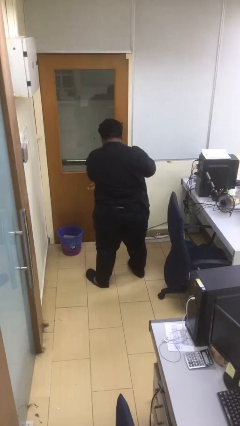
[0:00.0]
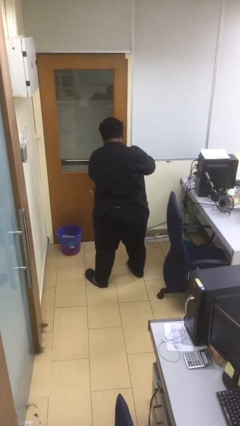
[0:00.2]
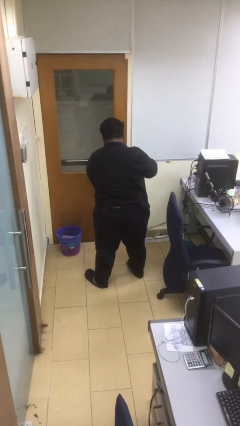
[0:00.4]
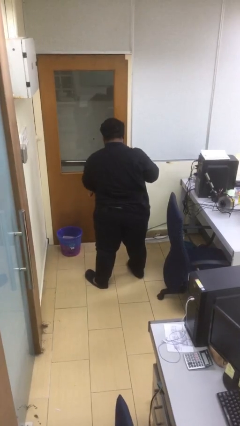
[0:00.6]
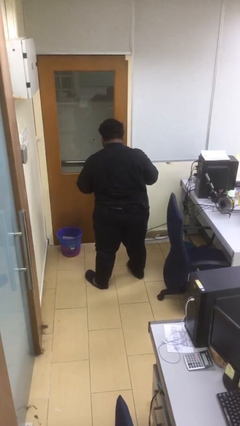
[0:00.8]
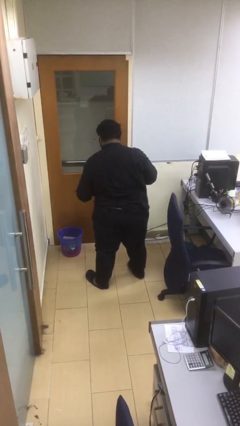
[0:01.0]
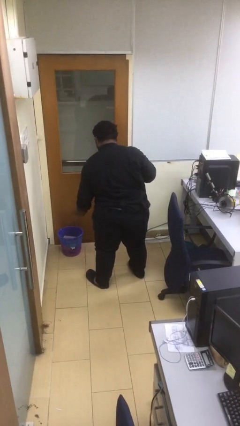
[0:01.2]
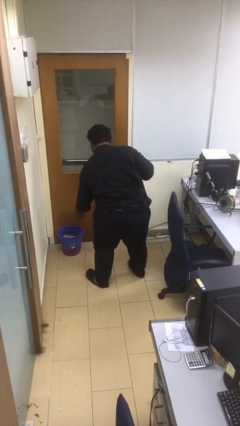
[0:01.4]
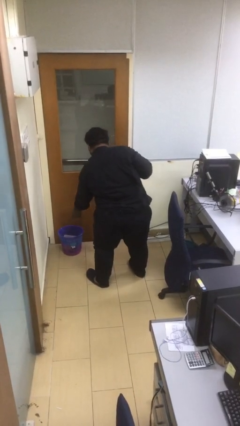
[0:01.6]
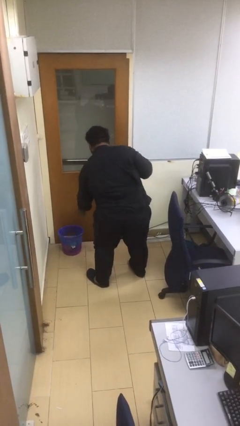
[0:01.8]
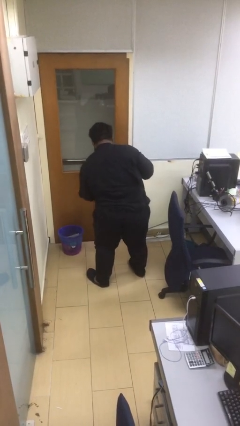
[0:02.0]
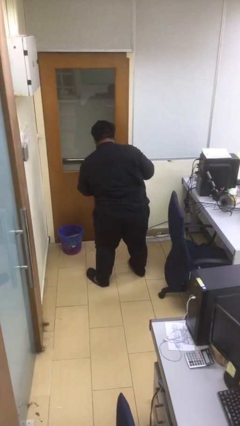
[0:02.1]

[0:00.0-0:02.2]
person discards trash

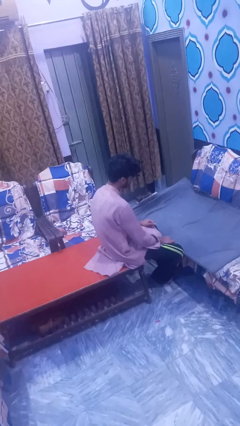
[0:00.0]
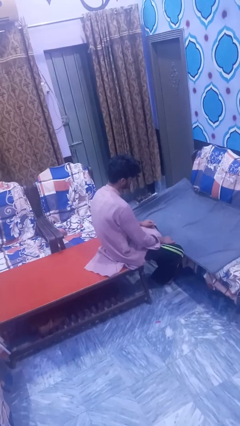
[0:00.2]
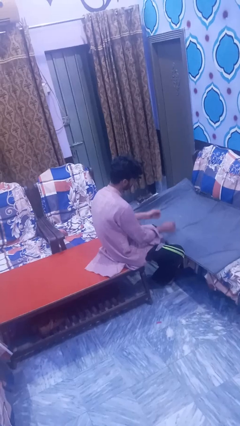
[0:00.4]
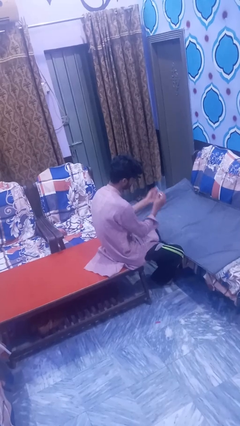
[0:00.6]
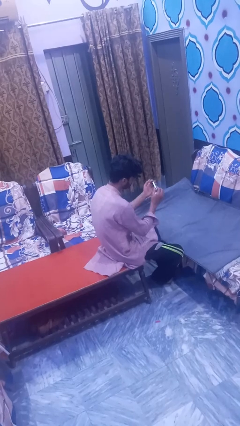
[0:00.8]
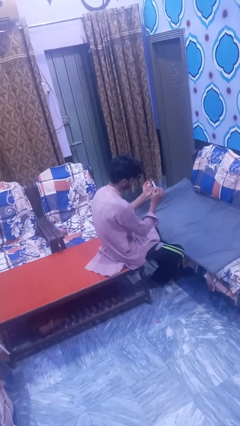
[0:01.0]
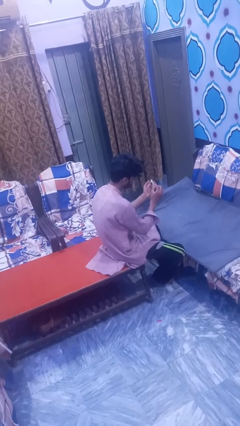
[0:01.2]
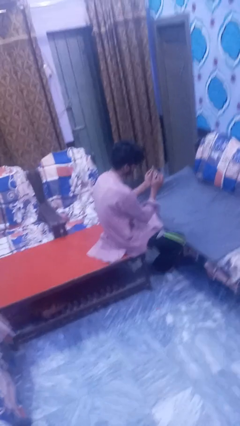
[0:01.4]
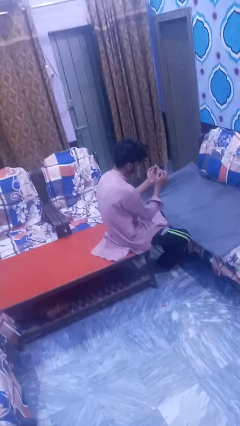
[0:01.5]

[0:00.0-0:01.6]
person files fingernails

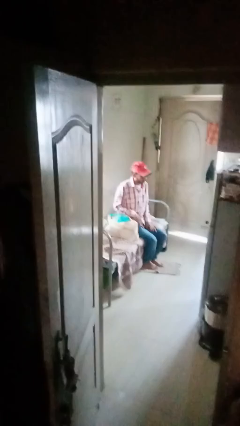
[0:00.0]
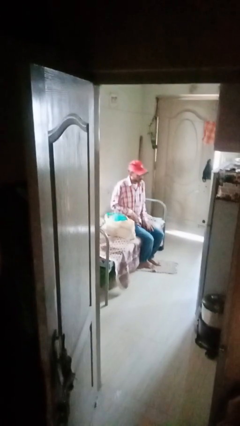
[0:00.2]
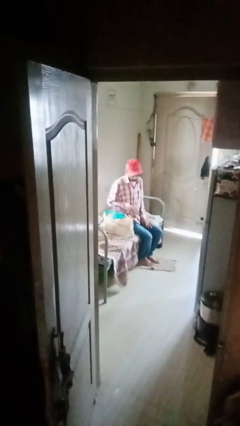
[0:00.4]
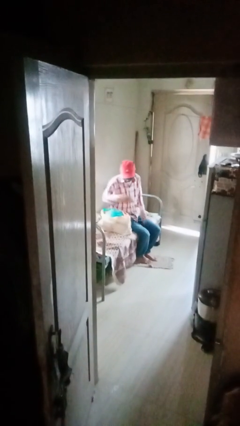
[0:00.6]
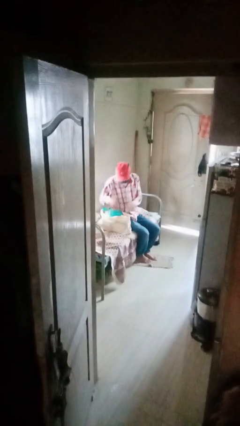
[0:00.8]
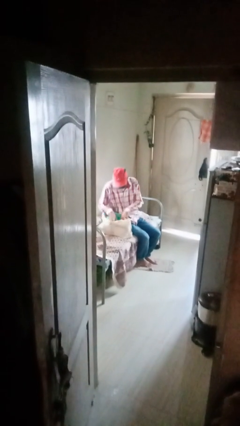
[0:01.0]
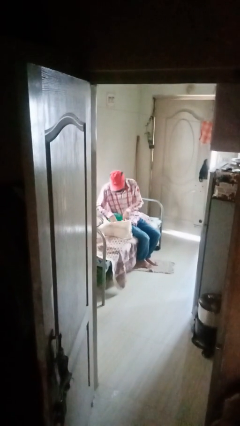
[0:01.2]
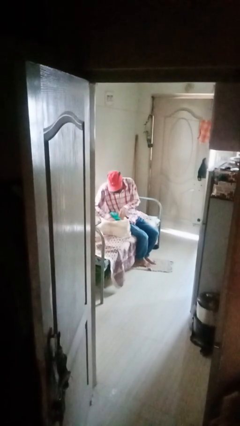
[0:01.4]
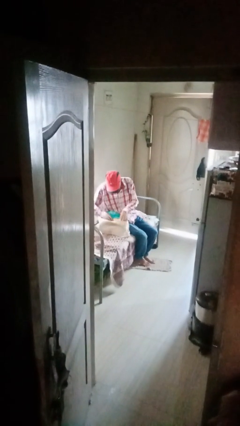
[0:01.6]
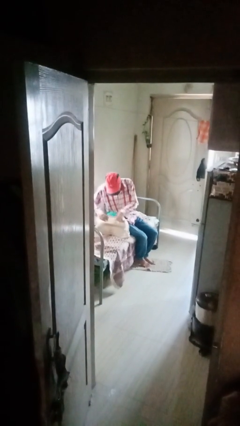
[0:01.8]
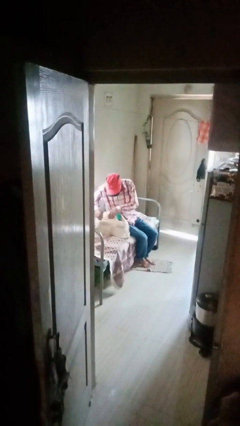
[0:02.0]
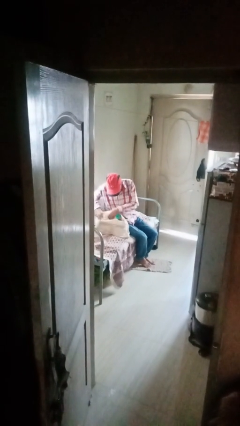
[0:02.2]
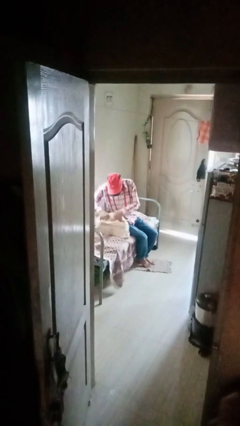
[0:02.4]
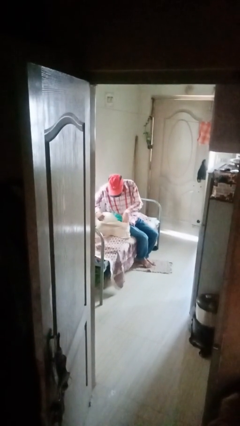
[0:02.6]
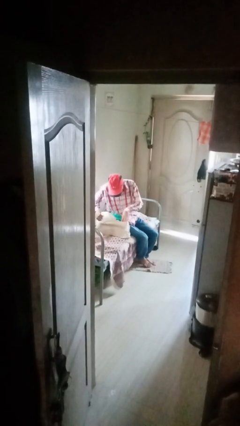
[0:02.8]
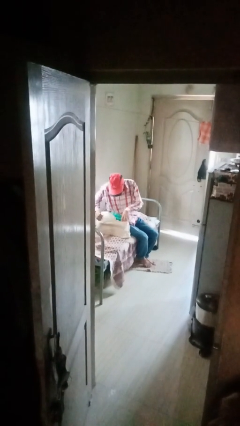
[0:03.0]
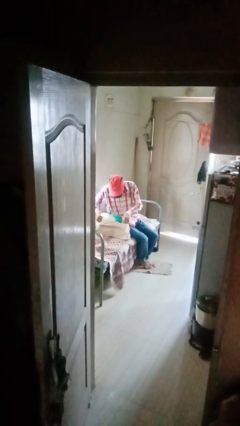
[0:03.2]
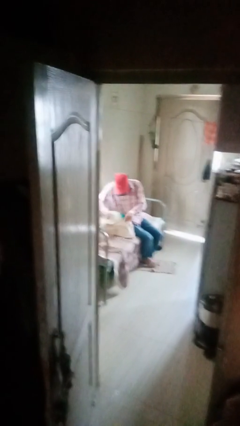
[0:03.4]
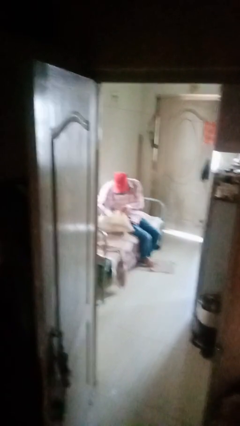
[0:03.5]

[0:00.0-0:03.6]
person searches in bag

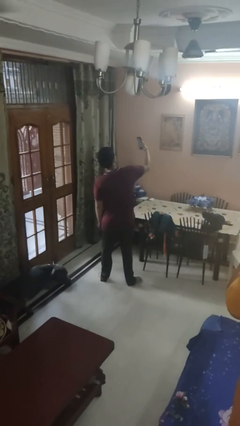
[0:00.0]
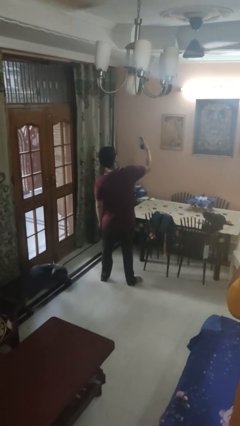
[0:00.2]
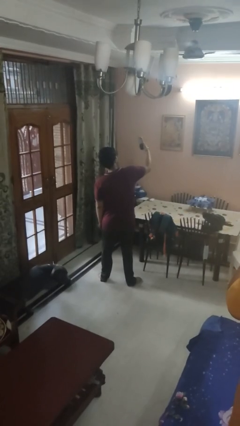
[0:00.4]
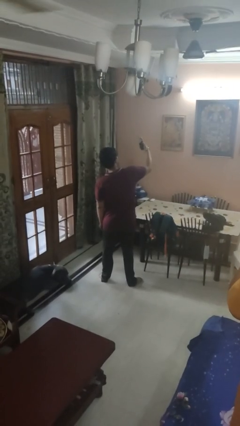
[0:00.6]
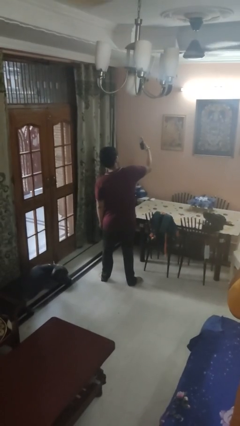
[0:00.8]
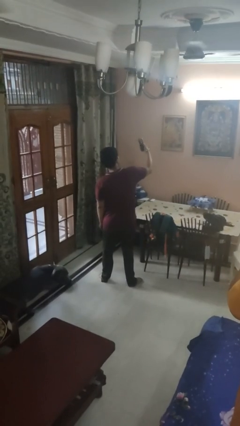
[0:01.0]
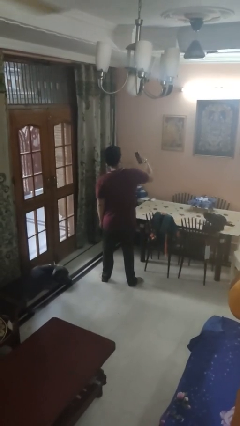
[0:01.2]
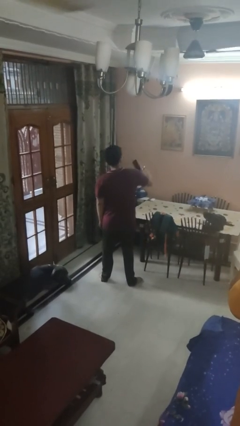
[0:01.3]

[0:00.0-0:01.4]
person takes selfie

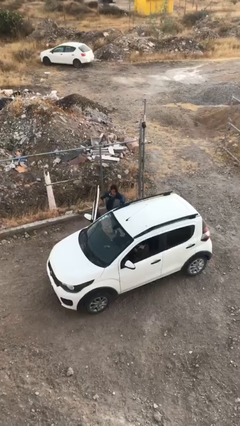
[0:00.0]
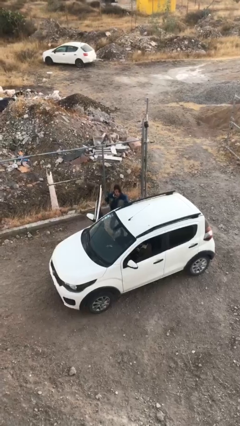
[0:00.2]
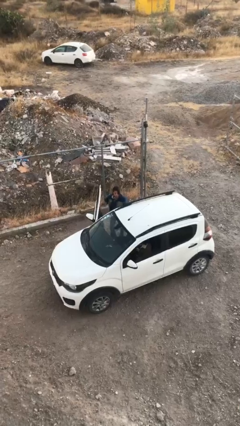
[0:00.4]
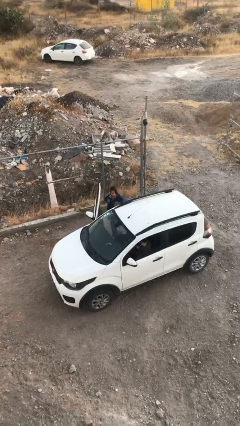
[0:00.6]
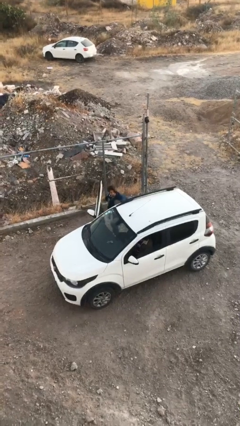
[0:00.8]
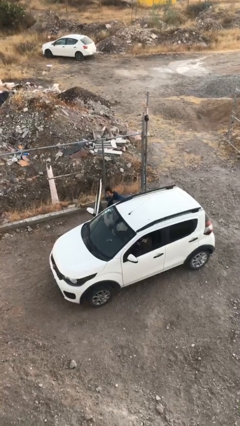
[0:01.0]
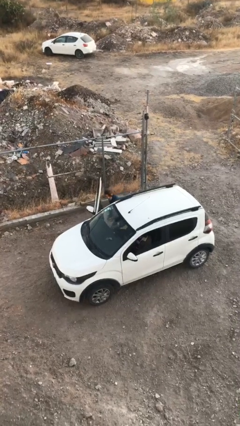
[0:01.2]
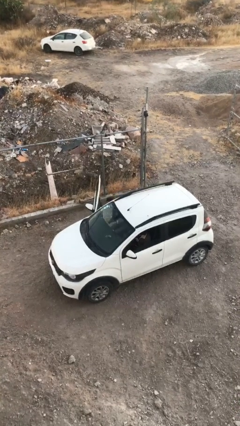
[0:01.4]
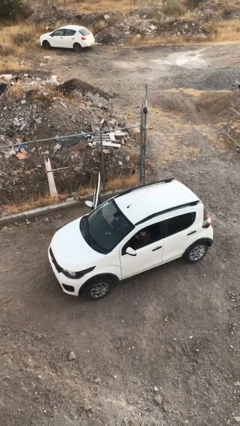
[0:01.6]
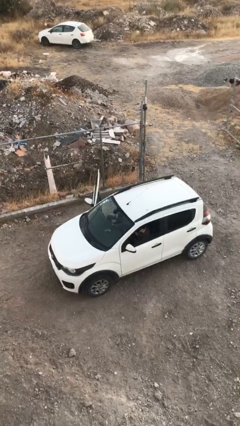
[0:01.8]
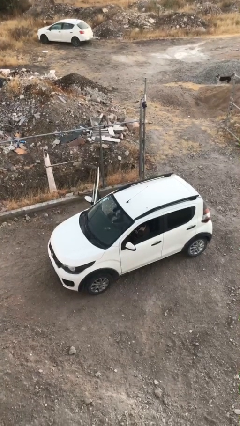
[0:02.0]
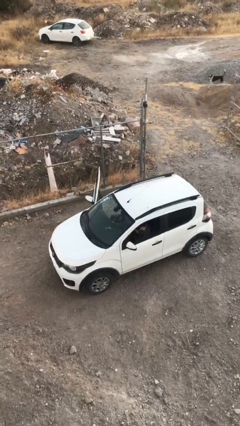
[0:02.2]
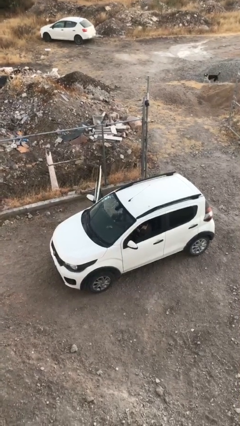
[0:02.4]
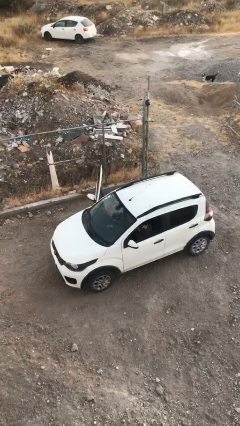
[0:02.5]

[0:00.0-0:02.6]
person enters car

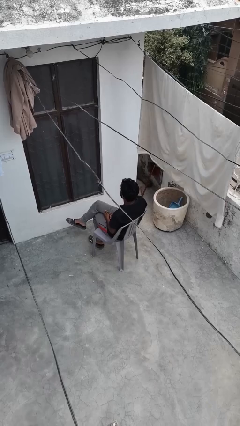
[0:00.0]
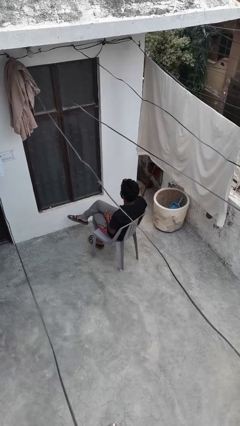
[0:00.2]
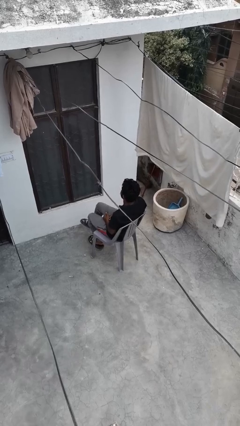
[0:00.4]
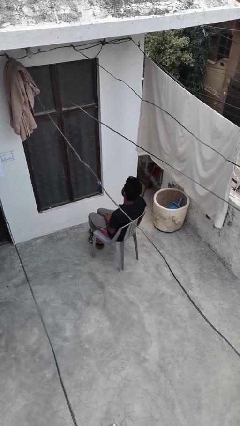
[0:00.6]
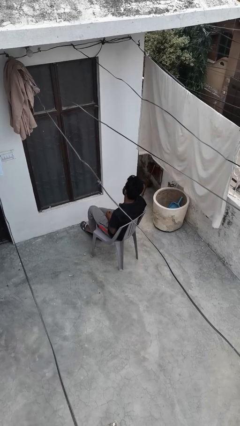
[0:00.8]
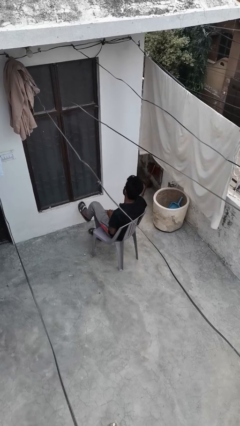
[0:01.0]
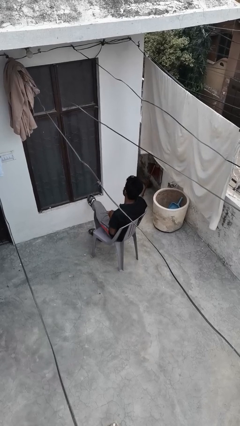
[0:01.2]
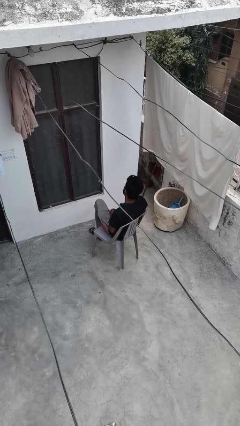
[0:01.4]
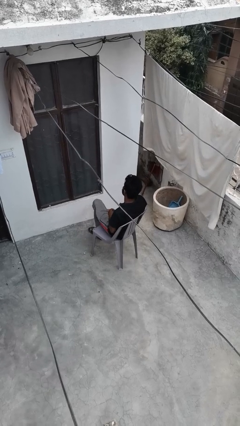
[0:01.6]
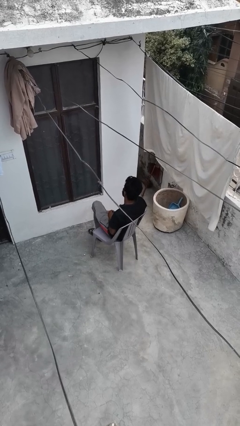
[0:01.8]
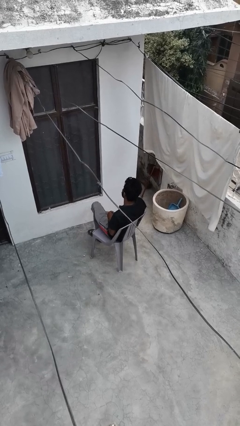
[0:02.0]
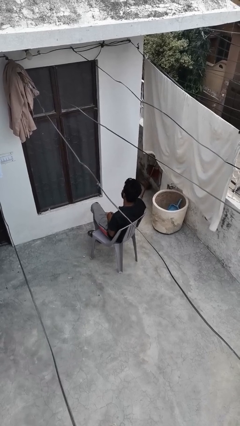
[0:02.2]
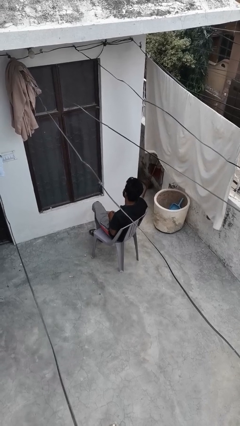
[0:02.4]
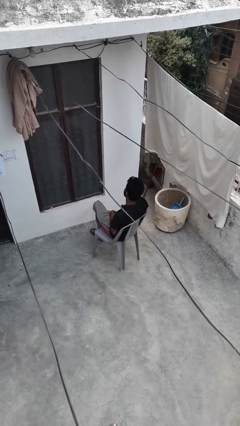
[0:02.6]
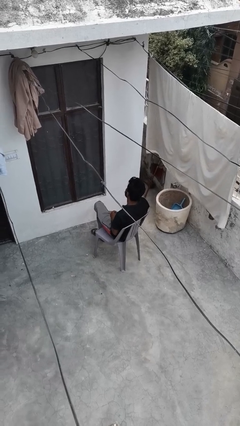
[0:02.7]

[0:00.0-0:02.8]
person crosses legs

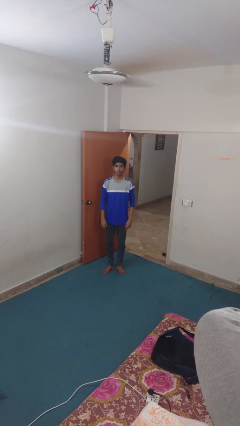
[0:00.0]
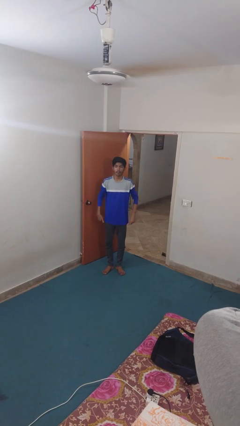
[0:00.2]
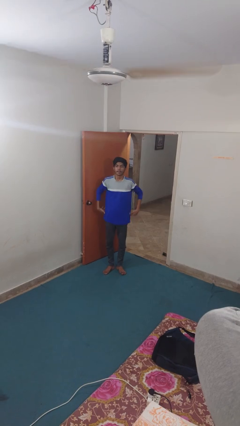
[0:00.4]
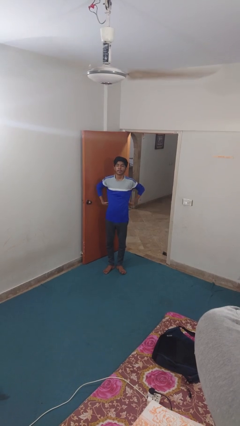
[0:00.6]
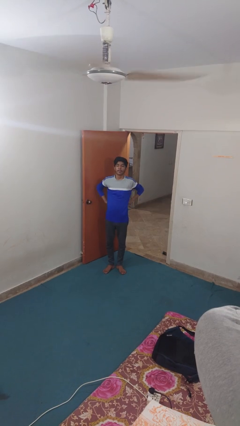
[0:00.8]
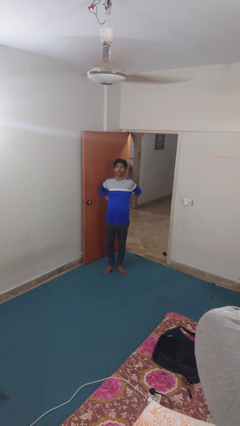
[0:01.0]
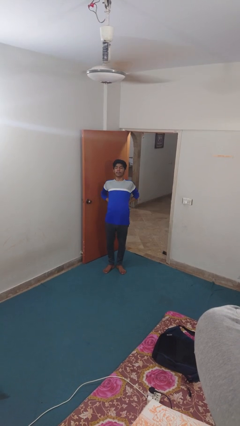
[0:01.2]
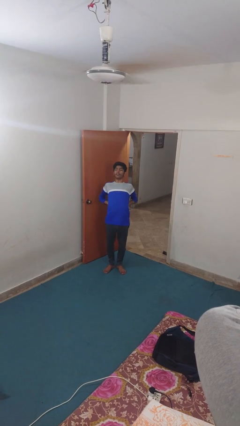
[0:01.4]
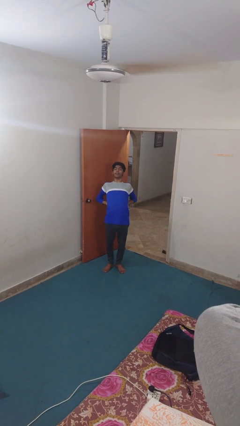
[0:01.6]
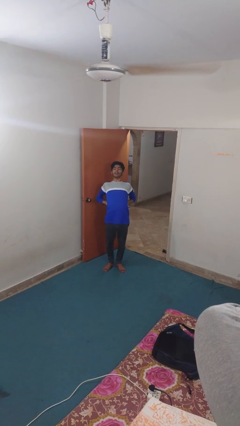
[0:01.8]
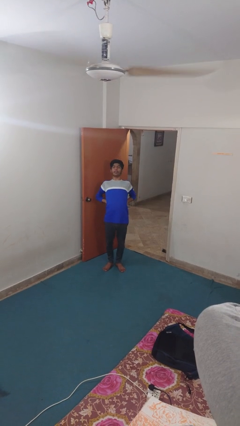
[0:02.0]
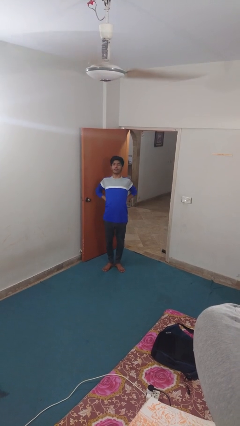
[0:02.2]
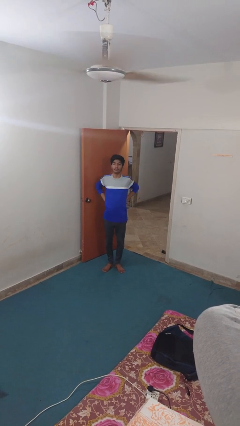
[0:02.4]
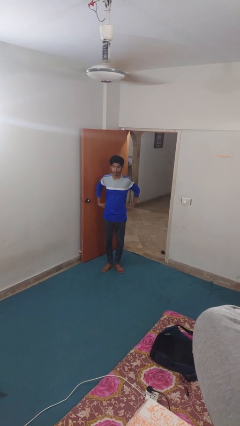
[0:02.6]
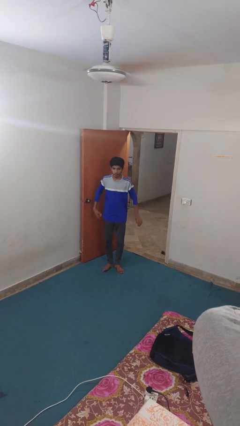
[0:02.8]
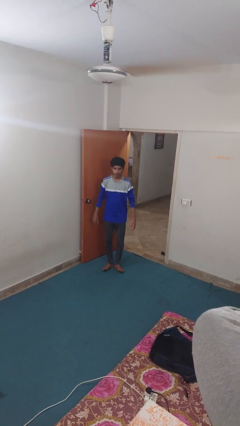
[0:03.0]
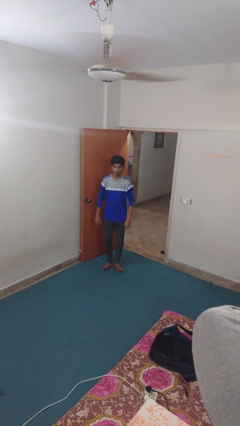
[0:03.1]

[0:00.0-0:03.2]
person stretches back
